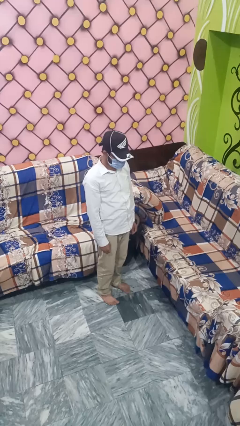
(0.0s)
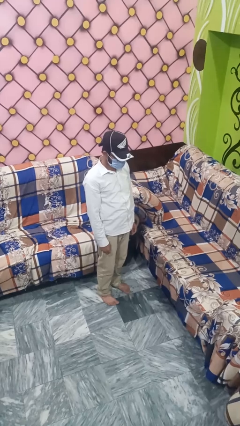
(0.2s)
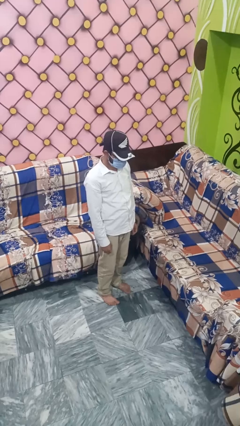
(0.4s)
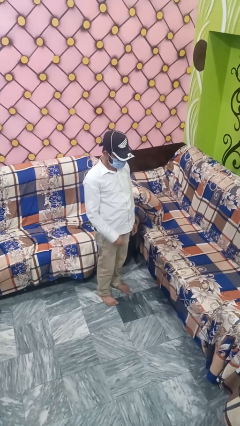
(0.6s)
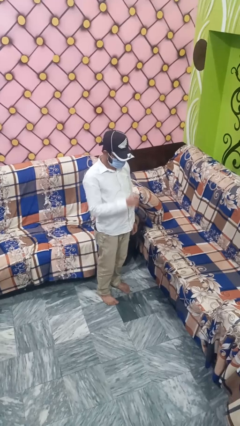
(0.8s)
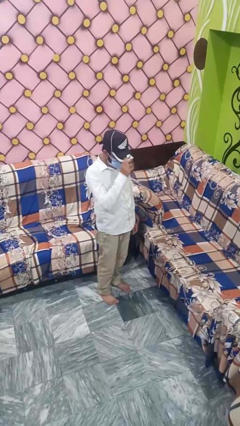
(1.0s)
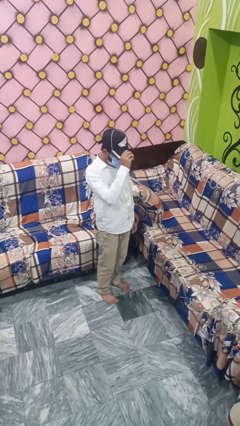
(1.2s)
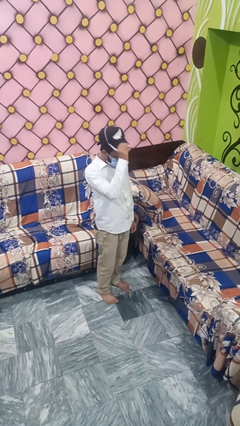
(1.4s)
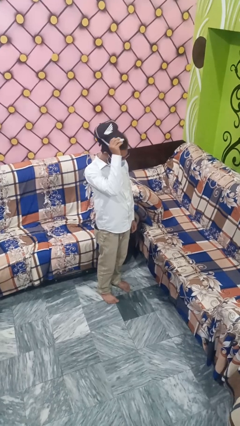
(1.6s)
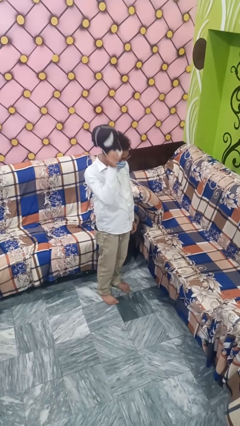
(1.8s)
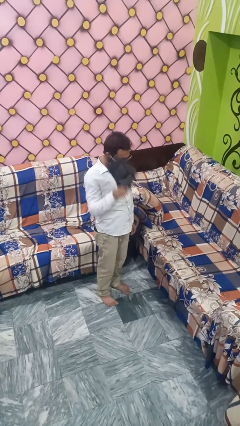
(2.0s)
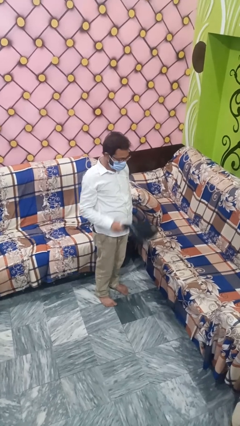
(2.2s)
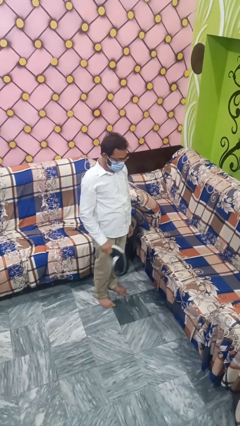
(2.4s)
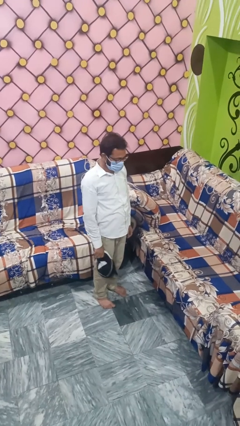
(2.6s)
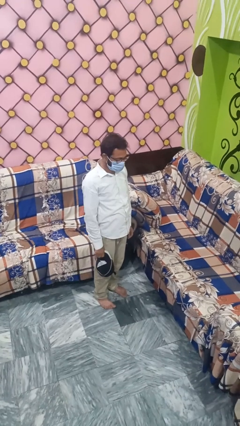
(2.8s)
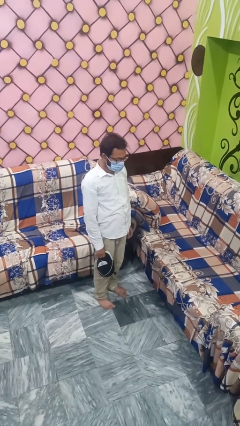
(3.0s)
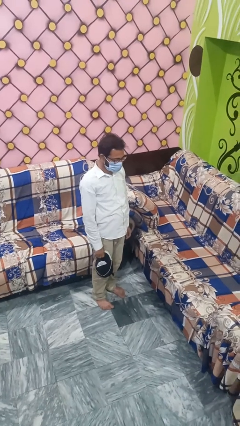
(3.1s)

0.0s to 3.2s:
person takes off hat

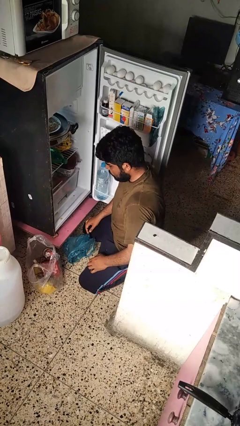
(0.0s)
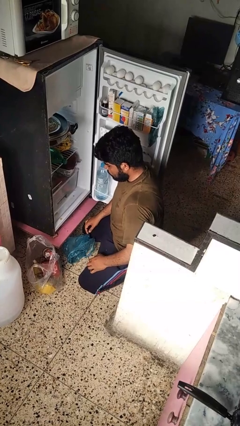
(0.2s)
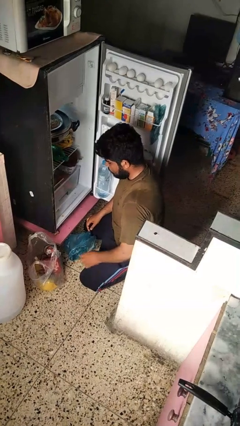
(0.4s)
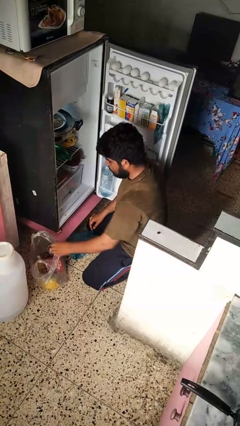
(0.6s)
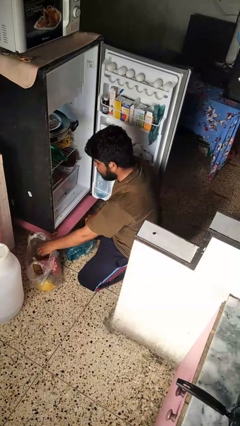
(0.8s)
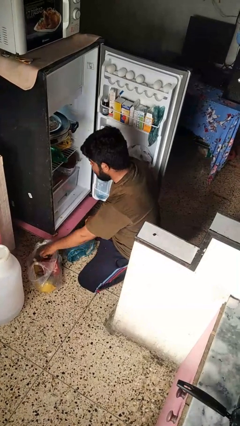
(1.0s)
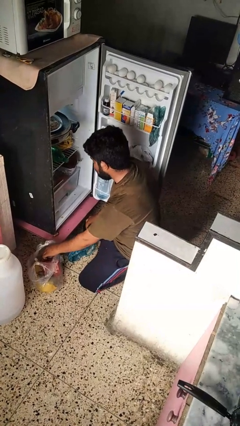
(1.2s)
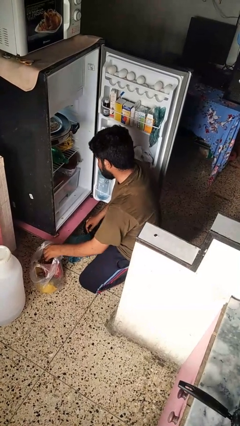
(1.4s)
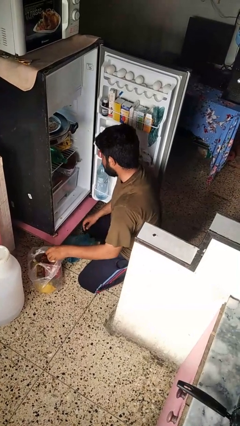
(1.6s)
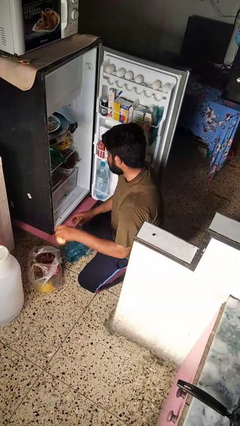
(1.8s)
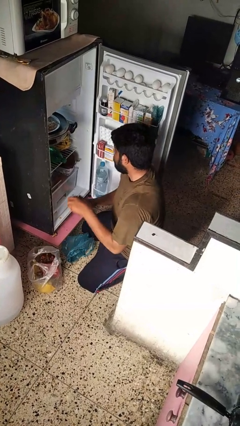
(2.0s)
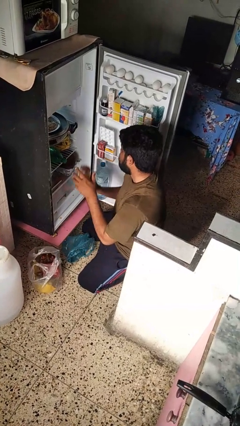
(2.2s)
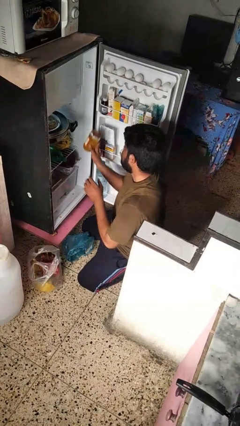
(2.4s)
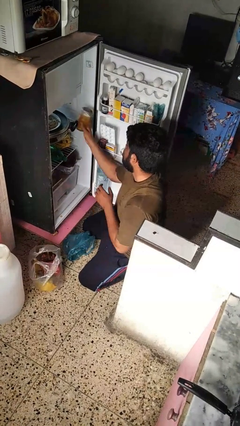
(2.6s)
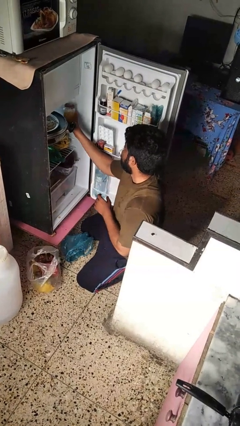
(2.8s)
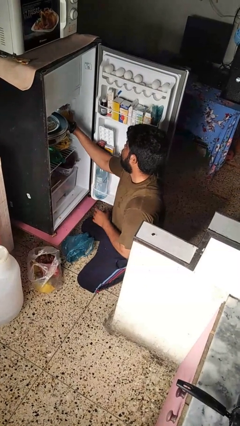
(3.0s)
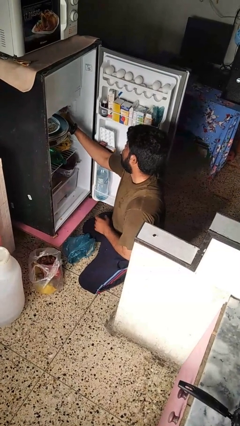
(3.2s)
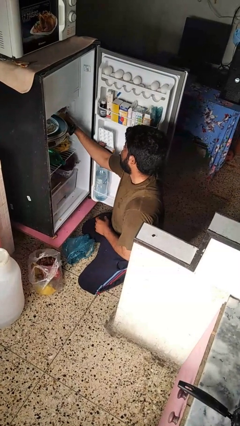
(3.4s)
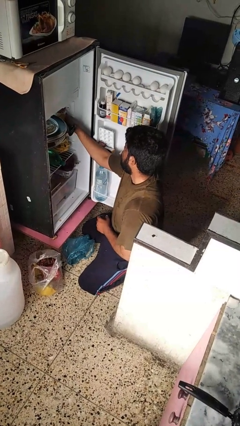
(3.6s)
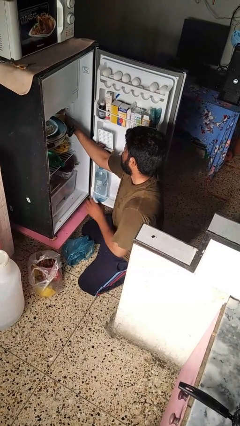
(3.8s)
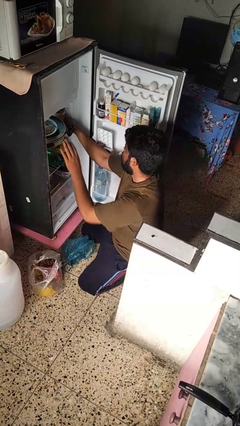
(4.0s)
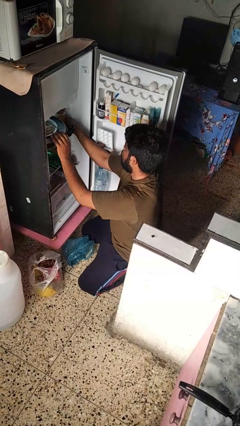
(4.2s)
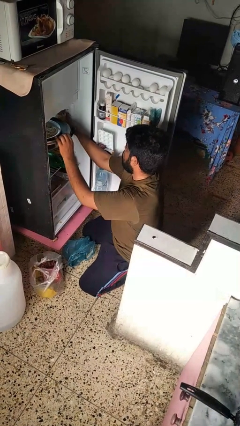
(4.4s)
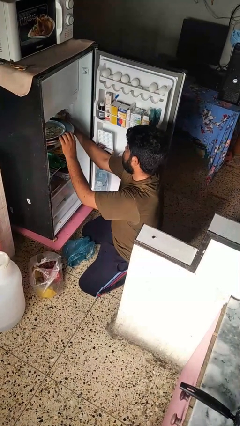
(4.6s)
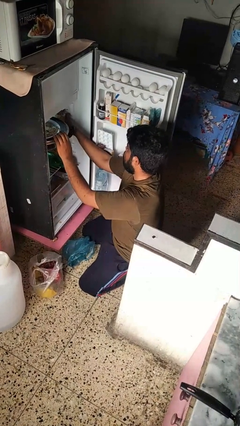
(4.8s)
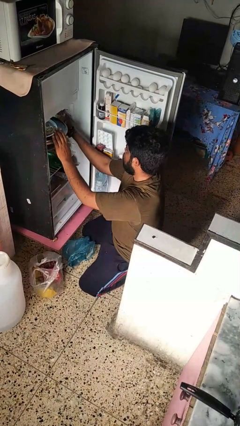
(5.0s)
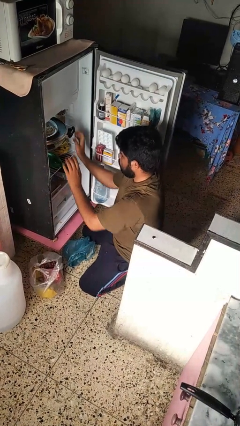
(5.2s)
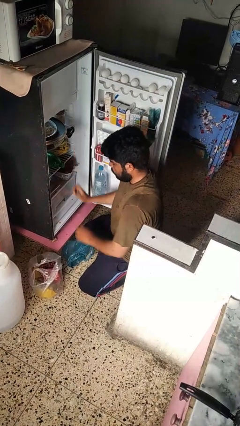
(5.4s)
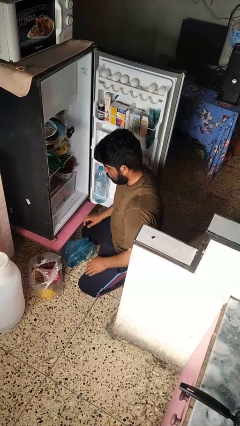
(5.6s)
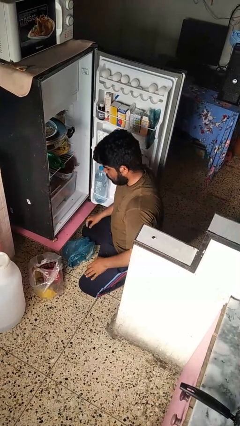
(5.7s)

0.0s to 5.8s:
person loads groceries into refrigerator

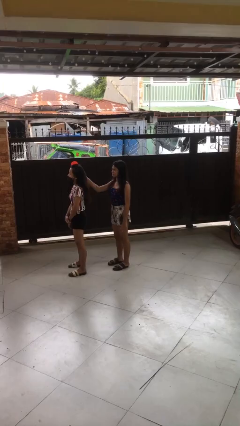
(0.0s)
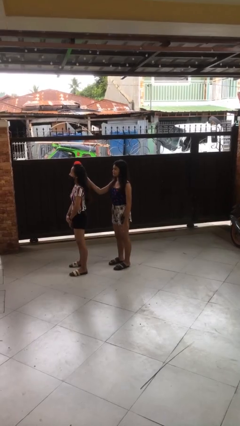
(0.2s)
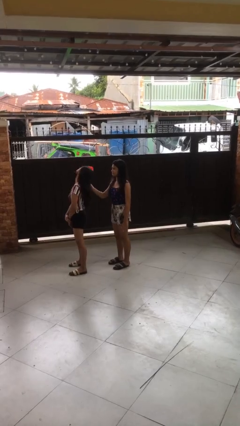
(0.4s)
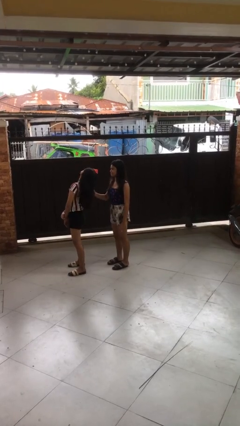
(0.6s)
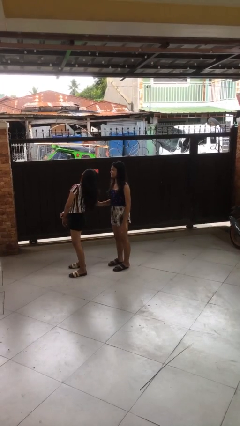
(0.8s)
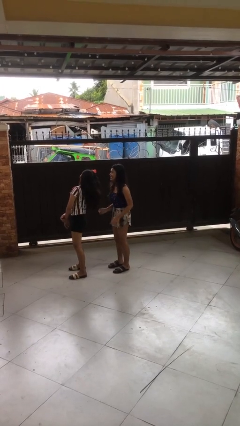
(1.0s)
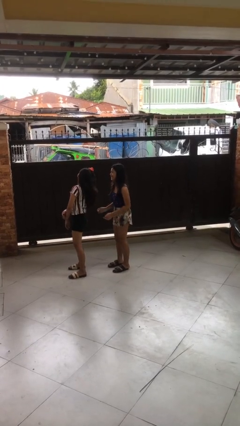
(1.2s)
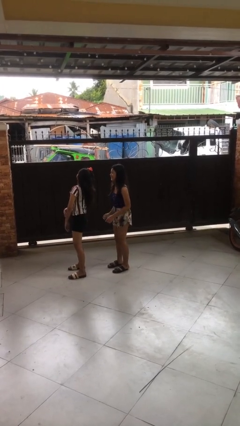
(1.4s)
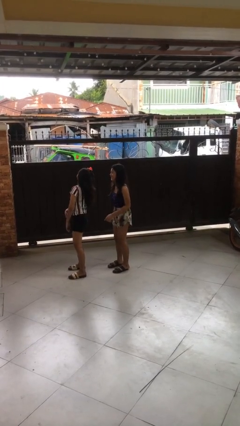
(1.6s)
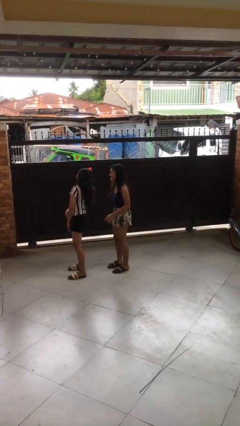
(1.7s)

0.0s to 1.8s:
person grabs person by hair

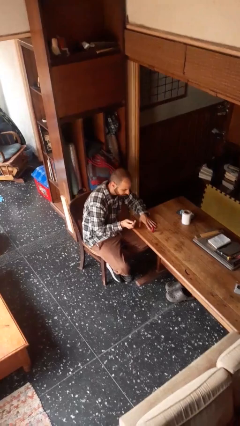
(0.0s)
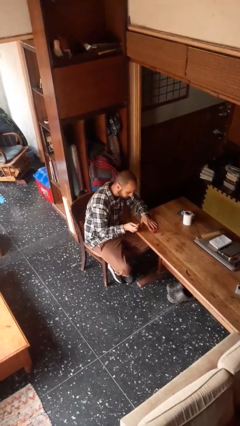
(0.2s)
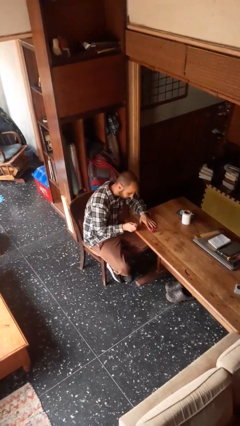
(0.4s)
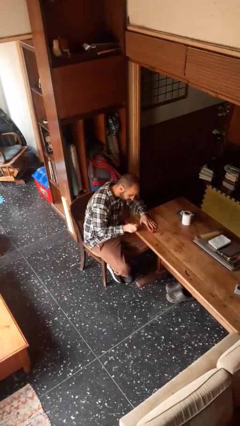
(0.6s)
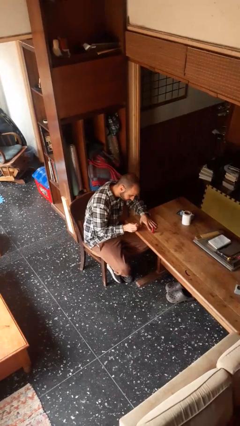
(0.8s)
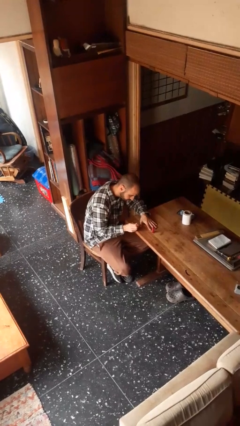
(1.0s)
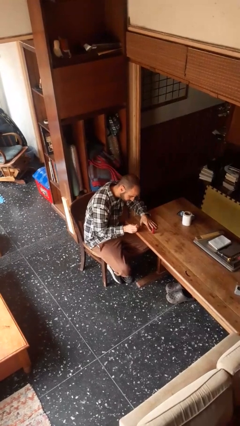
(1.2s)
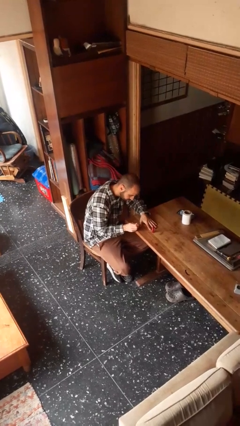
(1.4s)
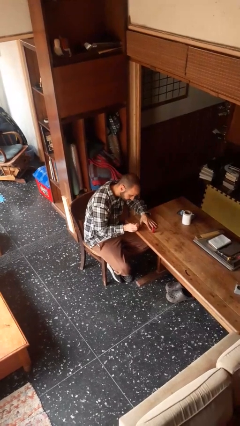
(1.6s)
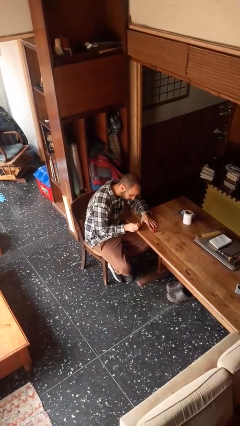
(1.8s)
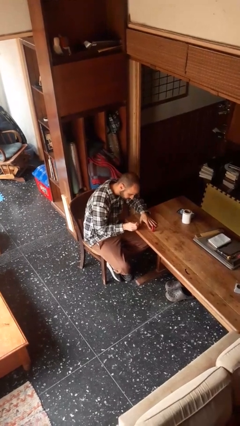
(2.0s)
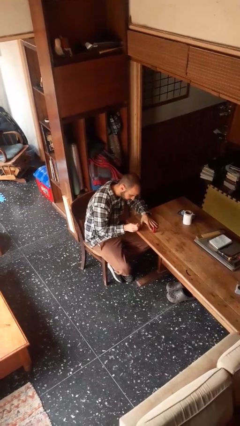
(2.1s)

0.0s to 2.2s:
person paints fingernails

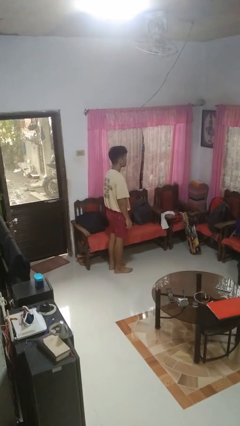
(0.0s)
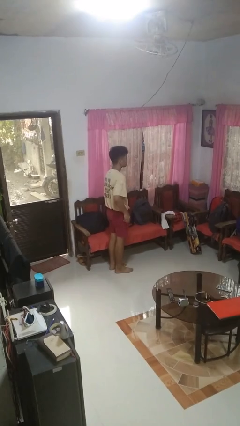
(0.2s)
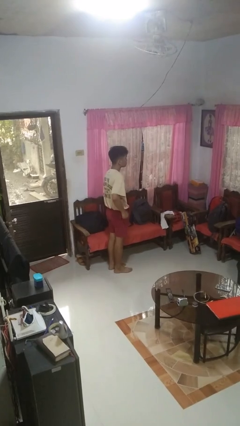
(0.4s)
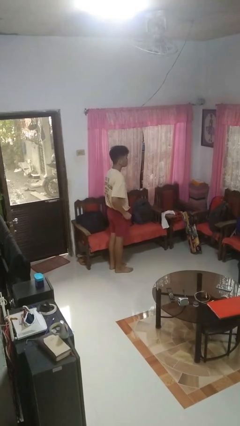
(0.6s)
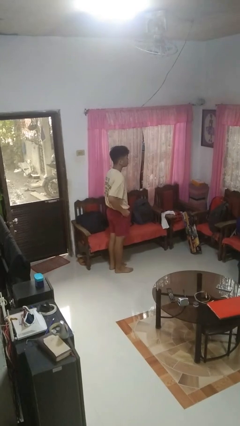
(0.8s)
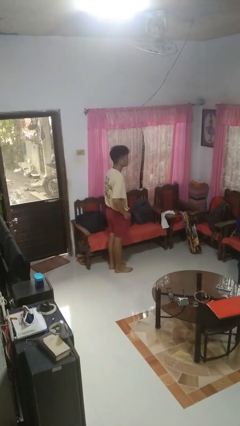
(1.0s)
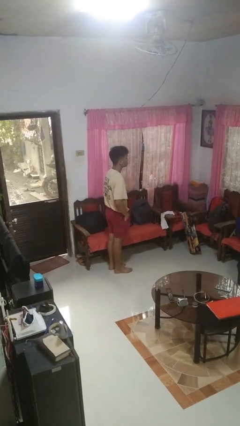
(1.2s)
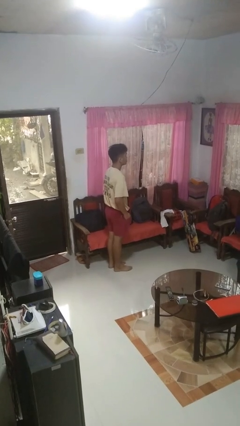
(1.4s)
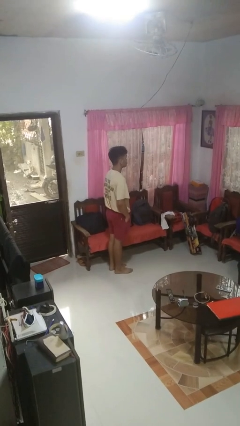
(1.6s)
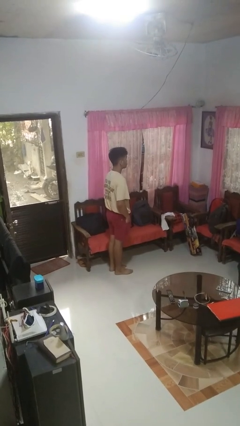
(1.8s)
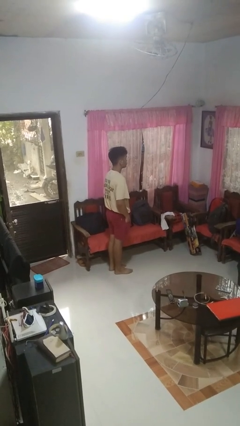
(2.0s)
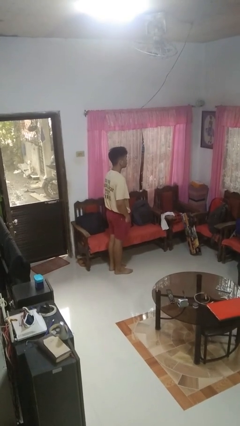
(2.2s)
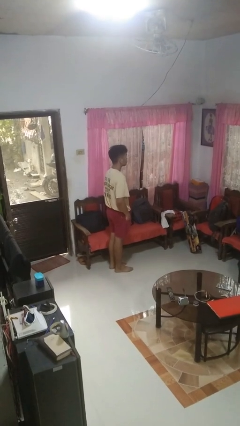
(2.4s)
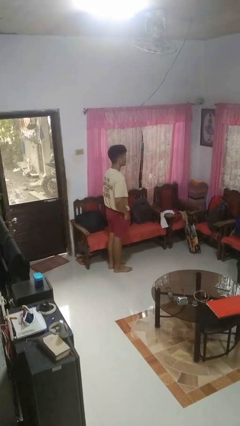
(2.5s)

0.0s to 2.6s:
person puts hands in back pockets

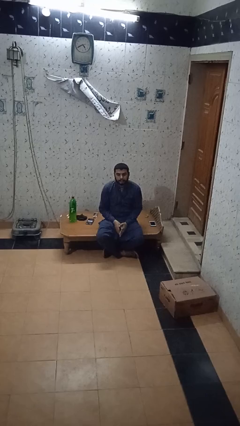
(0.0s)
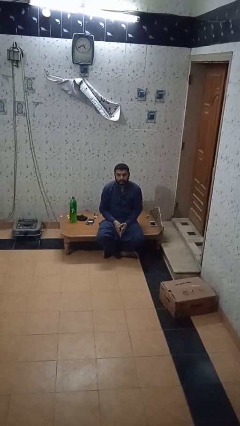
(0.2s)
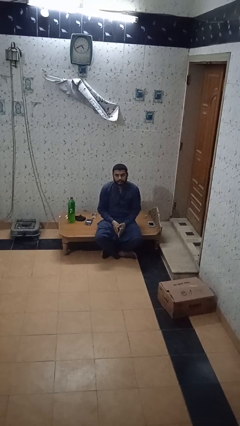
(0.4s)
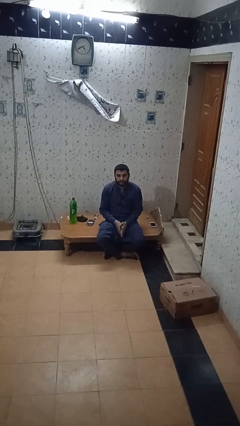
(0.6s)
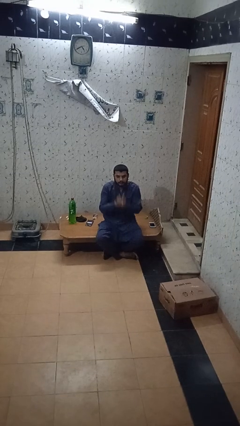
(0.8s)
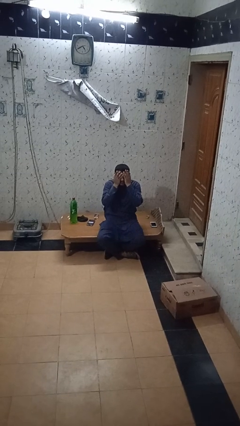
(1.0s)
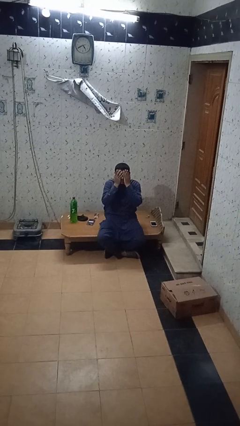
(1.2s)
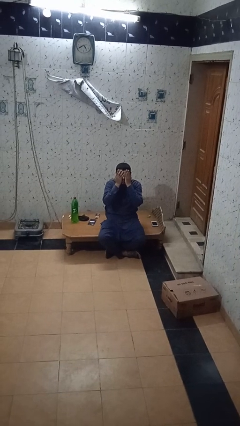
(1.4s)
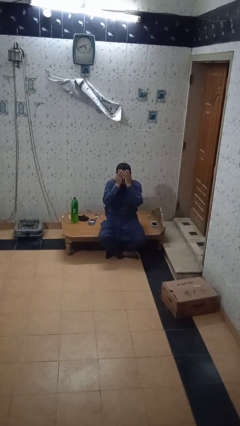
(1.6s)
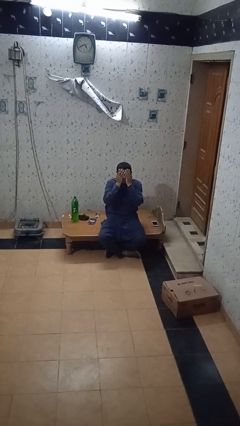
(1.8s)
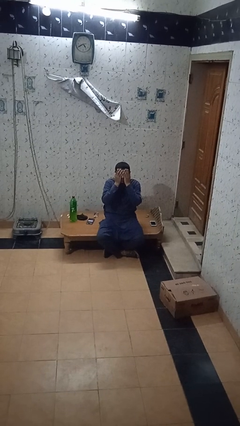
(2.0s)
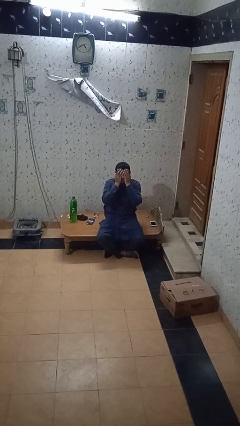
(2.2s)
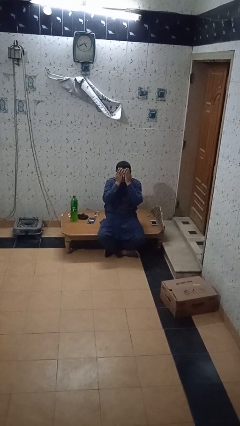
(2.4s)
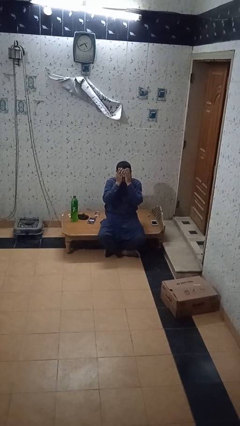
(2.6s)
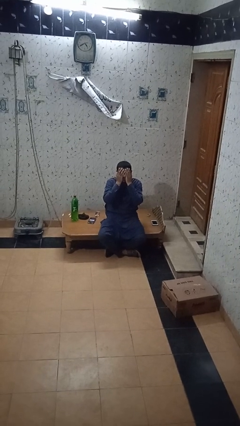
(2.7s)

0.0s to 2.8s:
person covers face with hands
